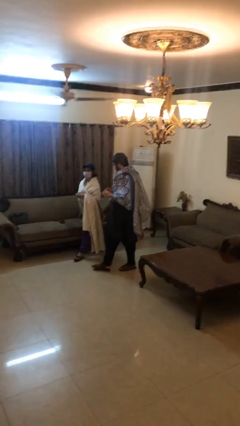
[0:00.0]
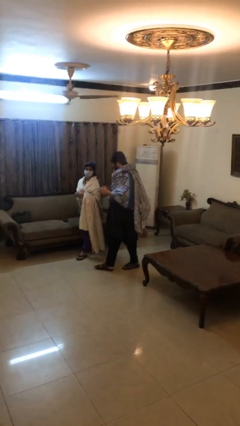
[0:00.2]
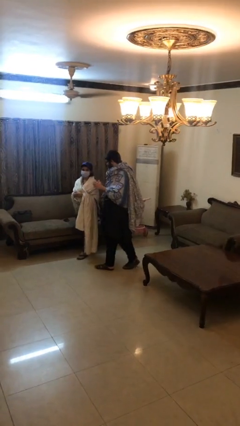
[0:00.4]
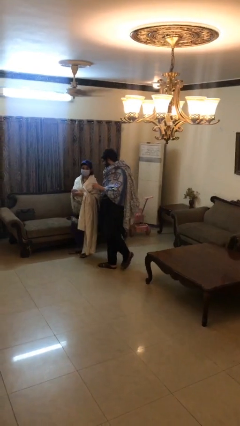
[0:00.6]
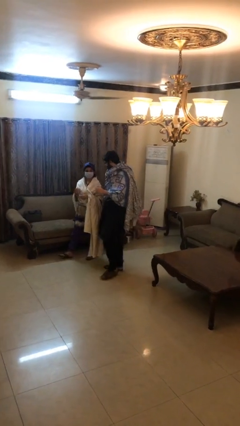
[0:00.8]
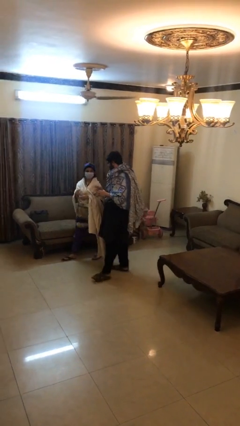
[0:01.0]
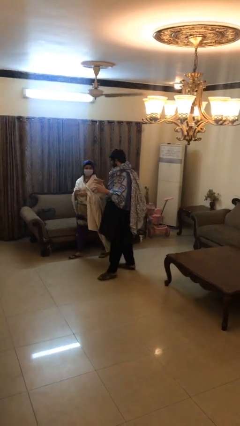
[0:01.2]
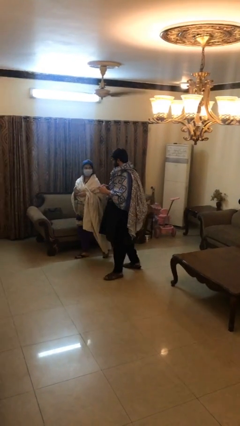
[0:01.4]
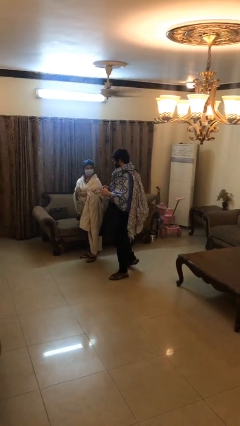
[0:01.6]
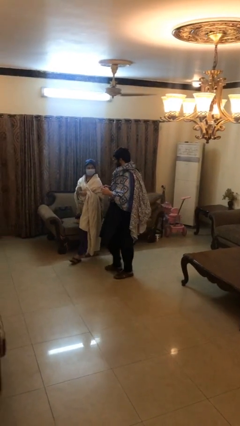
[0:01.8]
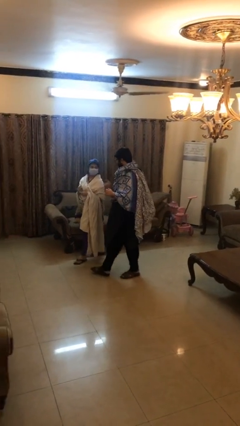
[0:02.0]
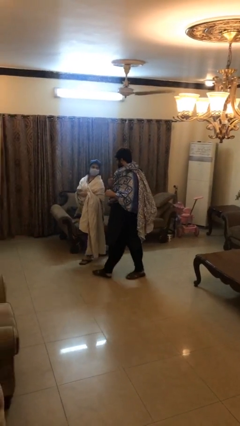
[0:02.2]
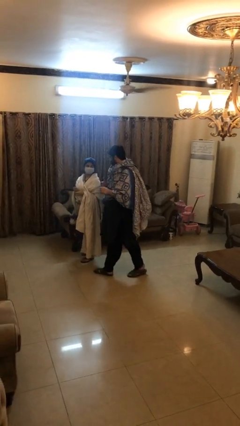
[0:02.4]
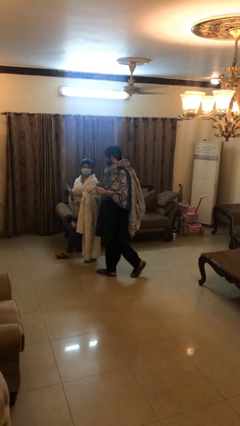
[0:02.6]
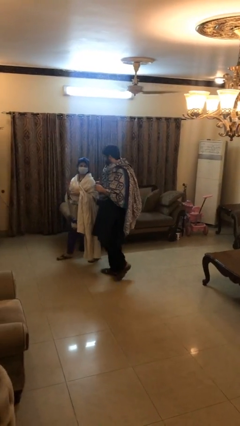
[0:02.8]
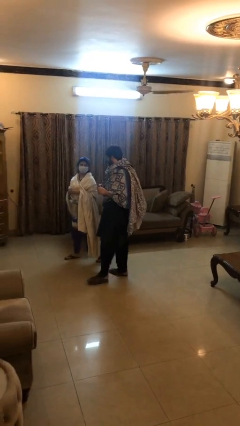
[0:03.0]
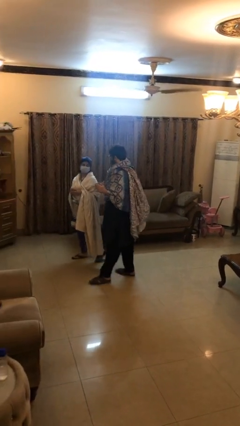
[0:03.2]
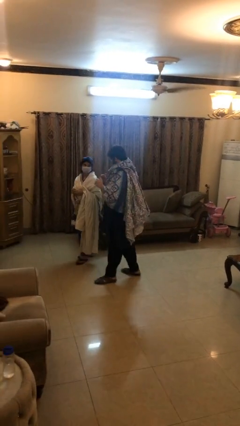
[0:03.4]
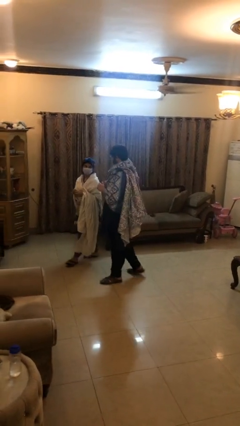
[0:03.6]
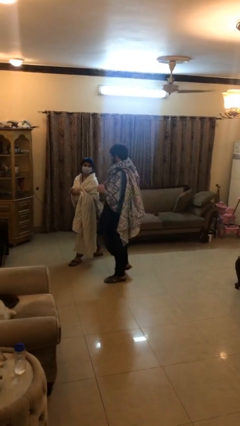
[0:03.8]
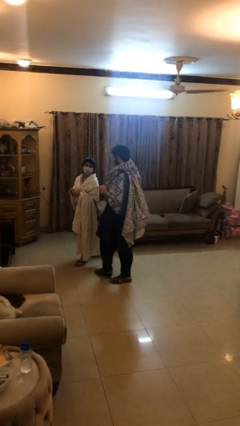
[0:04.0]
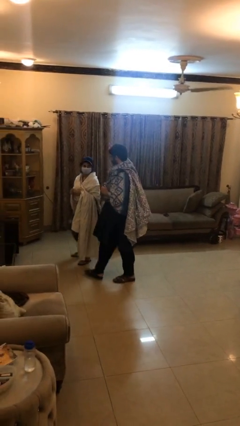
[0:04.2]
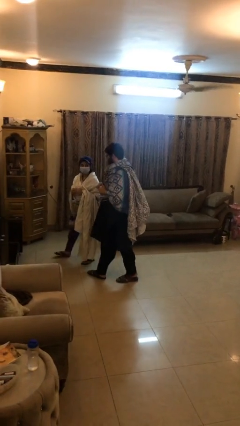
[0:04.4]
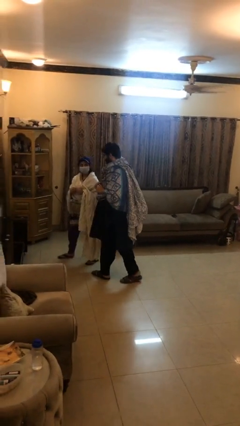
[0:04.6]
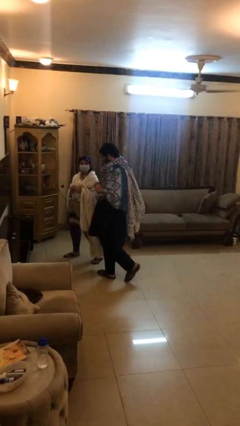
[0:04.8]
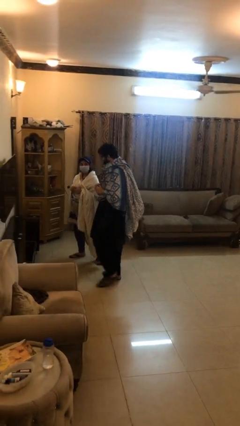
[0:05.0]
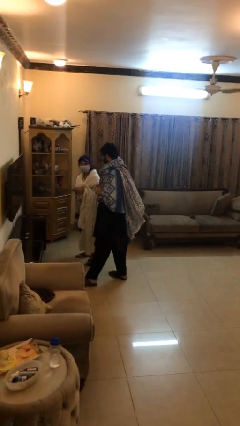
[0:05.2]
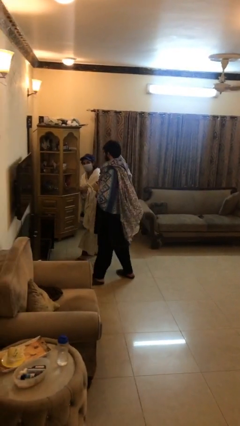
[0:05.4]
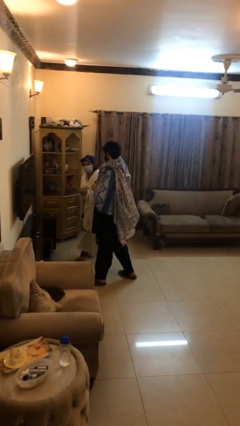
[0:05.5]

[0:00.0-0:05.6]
person talks to person

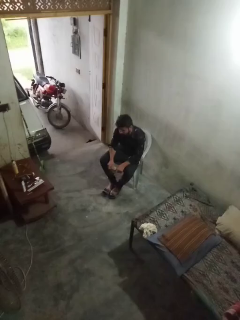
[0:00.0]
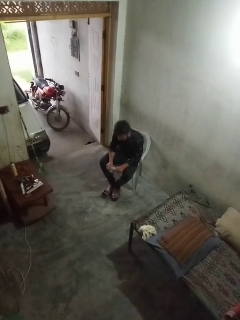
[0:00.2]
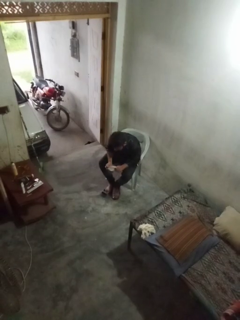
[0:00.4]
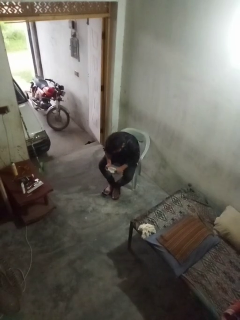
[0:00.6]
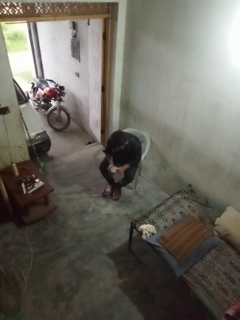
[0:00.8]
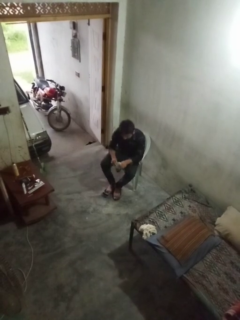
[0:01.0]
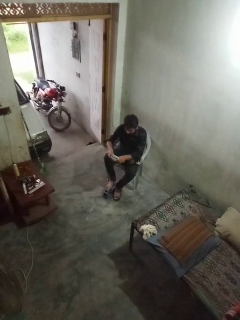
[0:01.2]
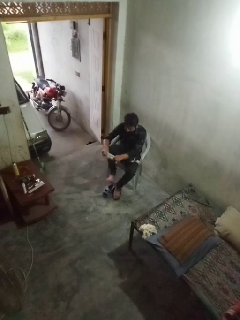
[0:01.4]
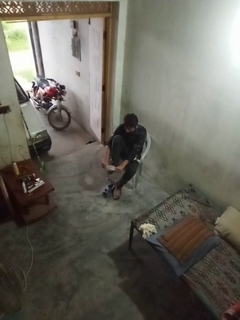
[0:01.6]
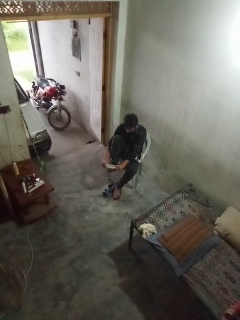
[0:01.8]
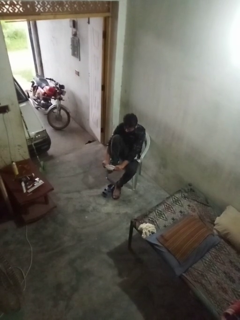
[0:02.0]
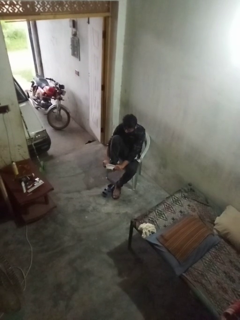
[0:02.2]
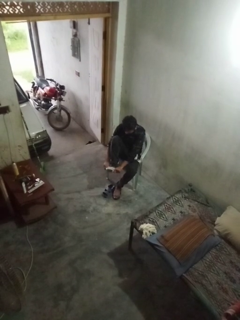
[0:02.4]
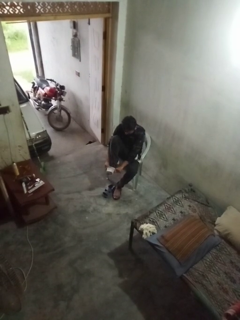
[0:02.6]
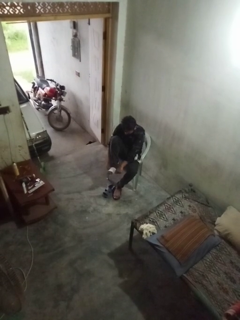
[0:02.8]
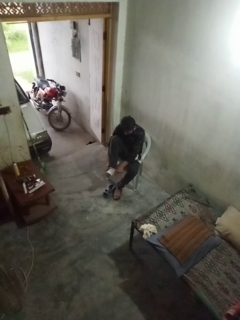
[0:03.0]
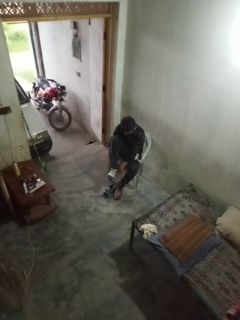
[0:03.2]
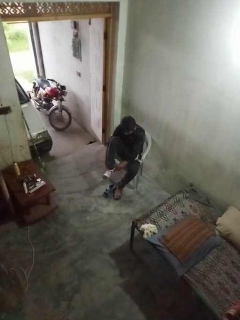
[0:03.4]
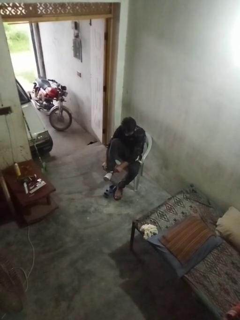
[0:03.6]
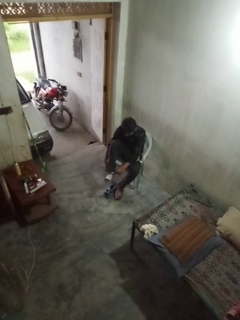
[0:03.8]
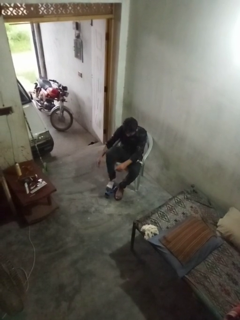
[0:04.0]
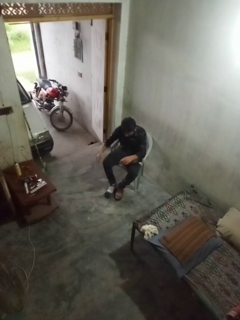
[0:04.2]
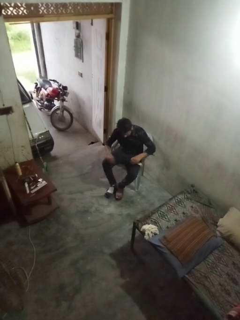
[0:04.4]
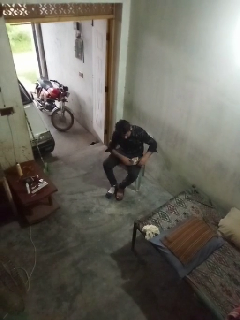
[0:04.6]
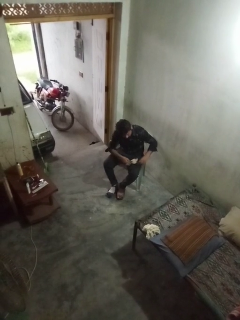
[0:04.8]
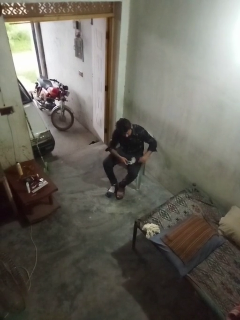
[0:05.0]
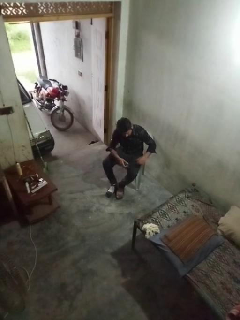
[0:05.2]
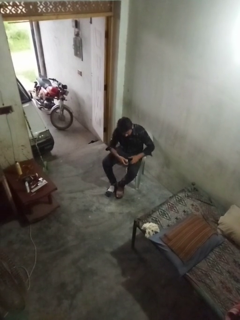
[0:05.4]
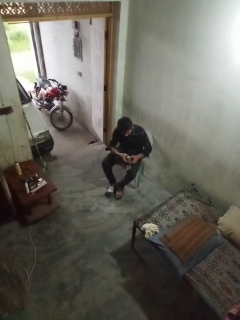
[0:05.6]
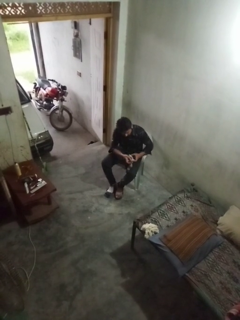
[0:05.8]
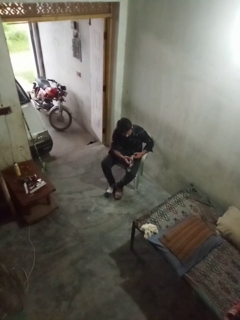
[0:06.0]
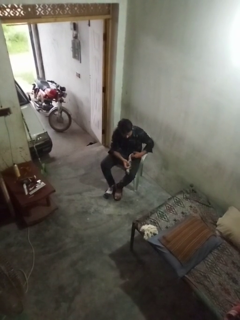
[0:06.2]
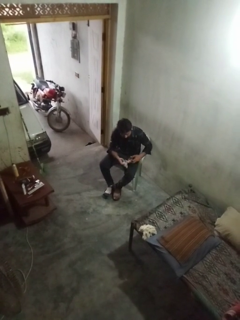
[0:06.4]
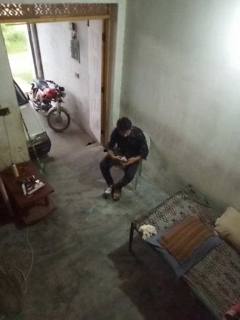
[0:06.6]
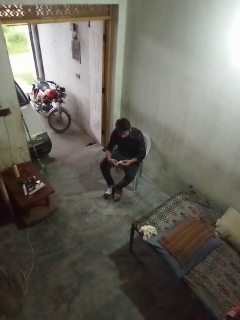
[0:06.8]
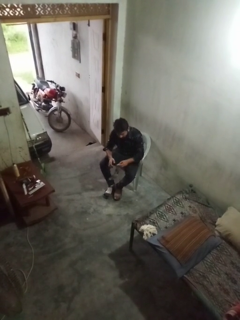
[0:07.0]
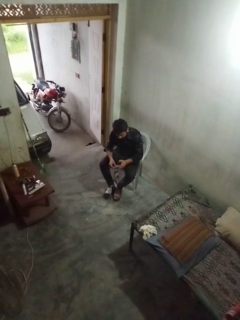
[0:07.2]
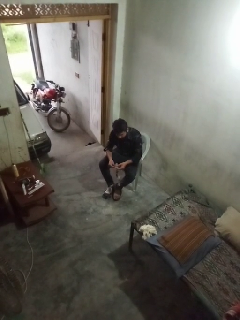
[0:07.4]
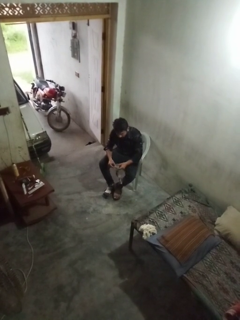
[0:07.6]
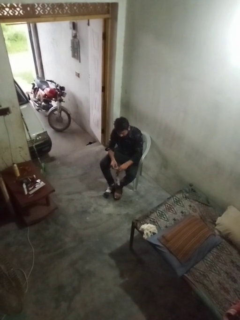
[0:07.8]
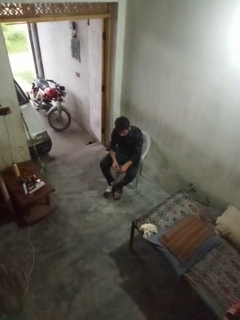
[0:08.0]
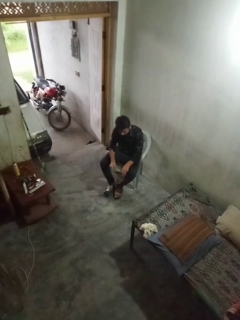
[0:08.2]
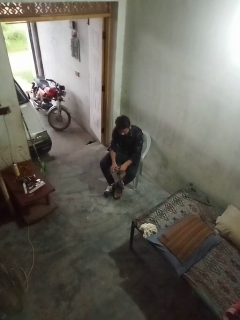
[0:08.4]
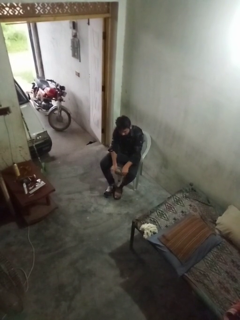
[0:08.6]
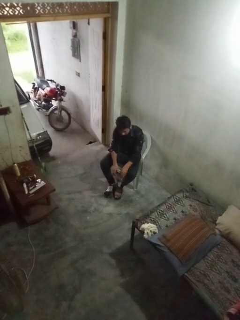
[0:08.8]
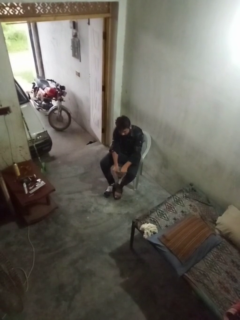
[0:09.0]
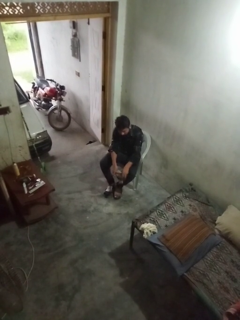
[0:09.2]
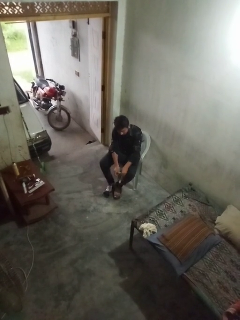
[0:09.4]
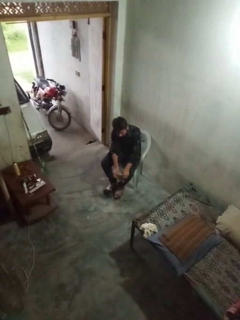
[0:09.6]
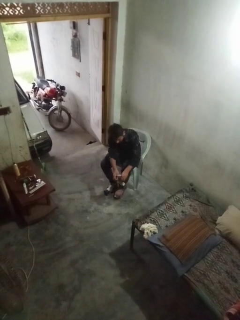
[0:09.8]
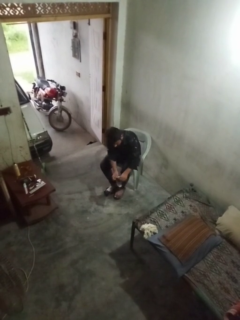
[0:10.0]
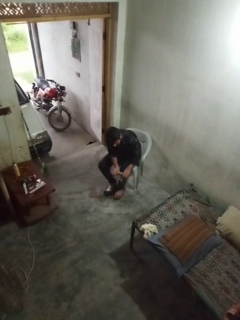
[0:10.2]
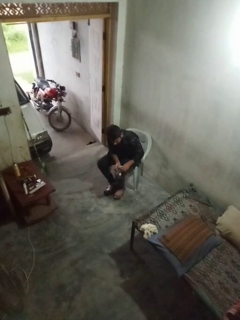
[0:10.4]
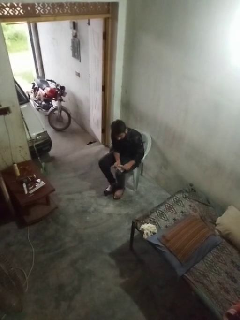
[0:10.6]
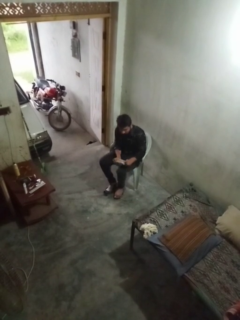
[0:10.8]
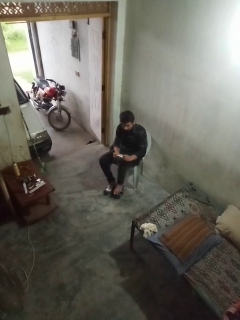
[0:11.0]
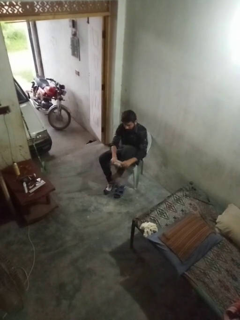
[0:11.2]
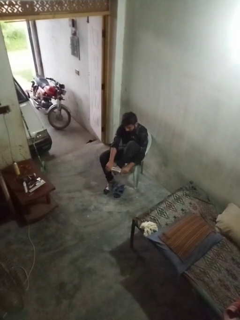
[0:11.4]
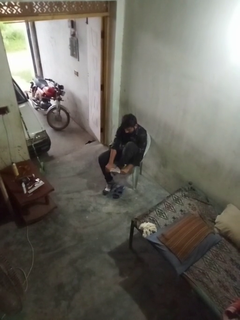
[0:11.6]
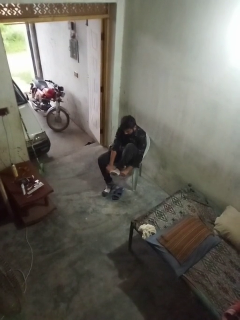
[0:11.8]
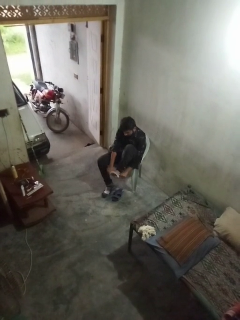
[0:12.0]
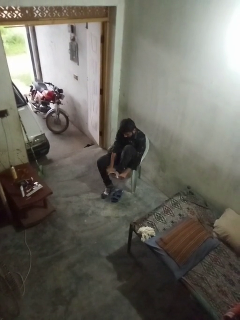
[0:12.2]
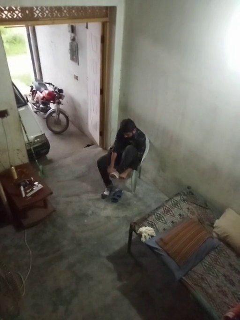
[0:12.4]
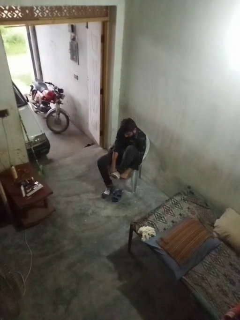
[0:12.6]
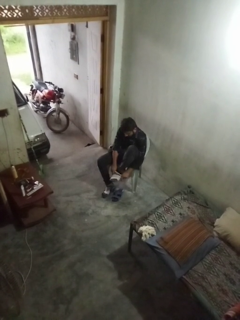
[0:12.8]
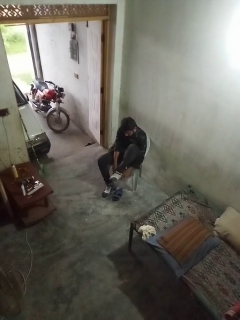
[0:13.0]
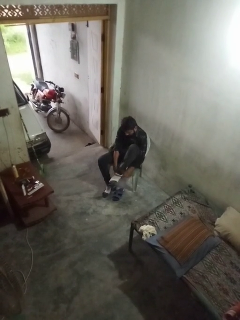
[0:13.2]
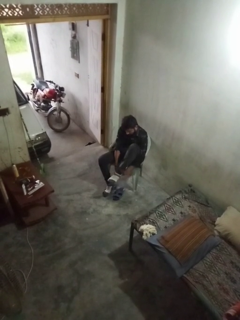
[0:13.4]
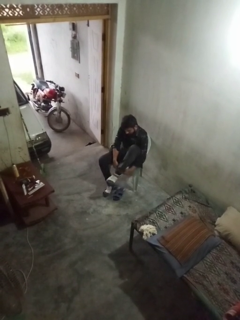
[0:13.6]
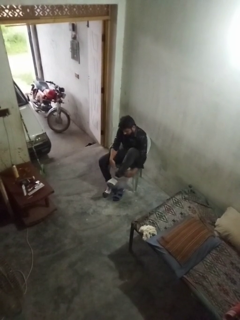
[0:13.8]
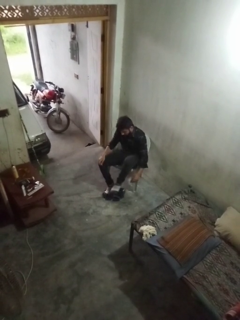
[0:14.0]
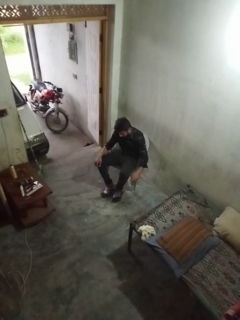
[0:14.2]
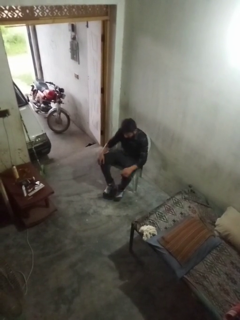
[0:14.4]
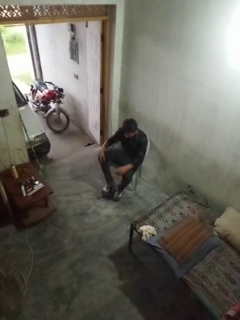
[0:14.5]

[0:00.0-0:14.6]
person puts on socks

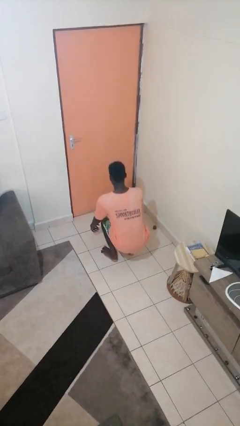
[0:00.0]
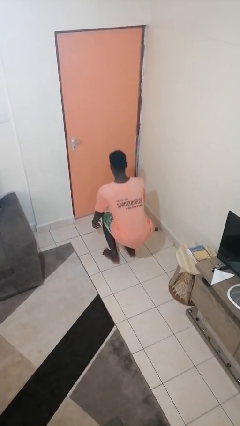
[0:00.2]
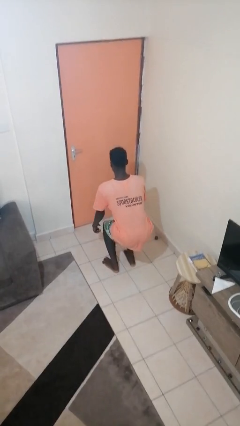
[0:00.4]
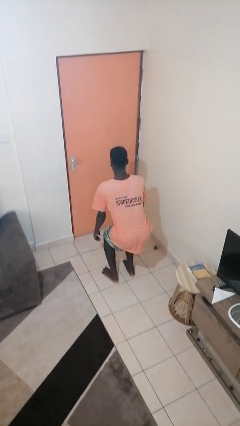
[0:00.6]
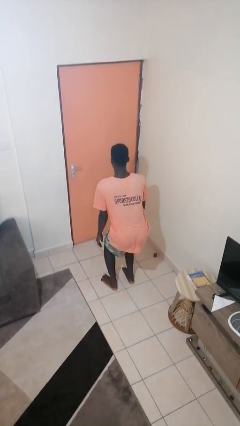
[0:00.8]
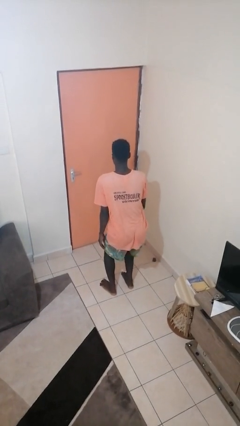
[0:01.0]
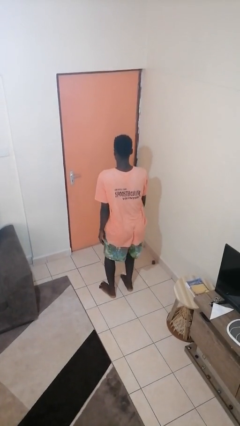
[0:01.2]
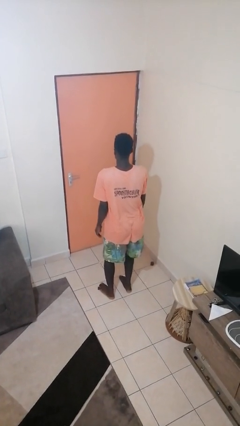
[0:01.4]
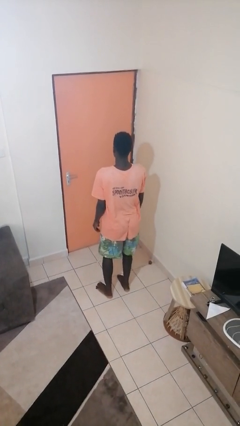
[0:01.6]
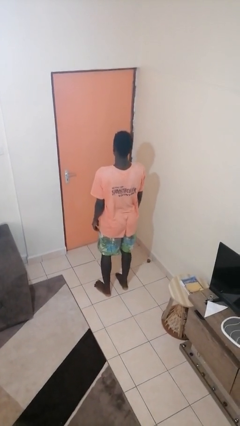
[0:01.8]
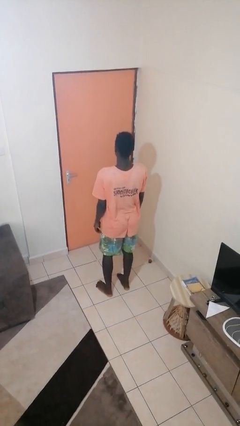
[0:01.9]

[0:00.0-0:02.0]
person stands up
